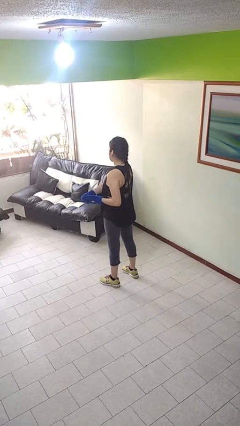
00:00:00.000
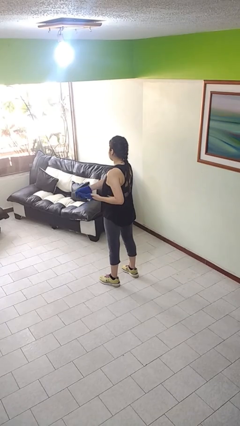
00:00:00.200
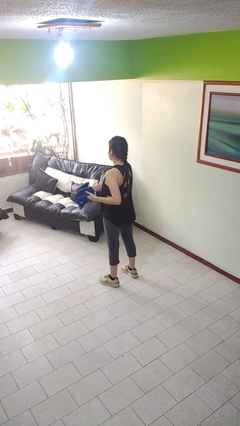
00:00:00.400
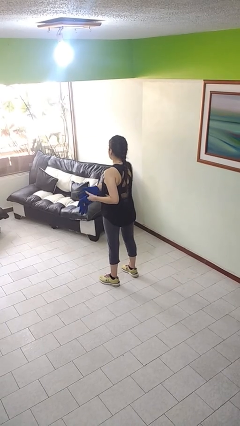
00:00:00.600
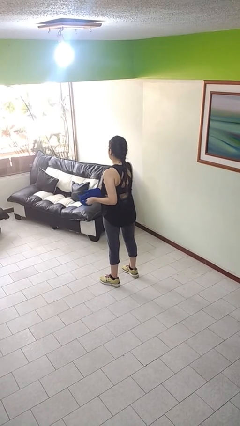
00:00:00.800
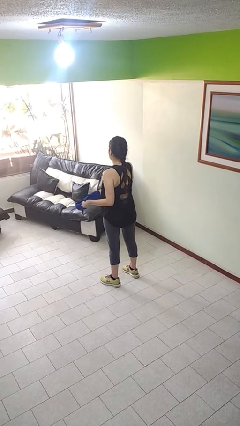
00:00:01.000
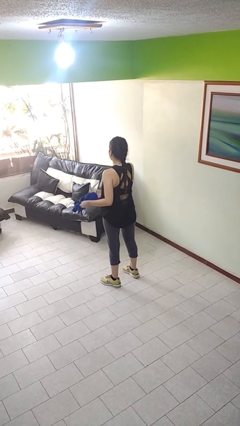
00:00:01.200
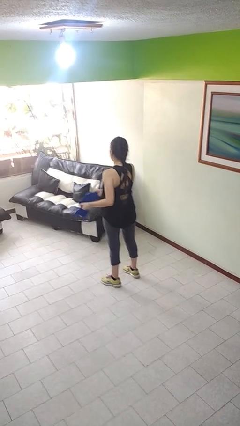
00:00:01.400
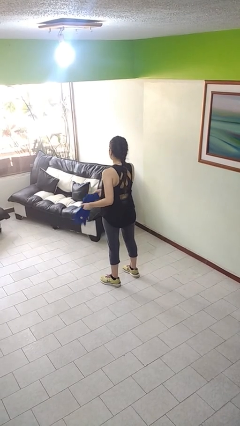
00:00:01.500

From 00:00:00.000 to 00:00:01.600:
person takes off gloves

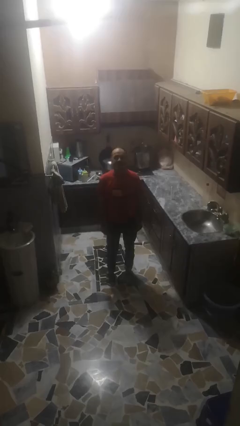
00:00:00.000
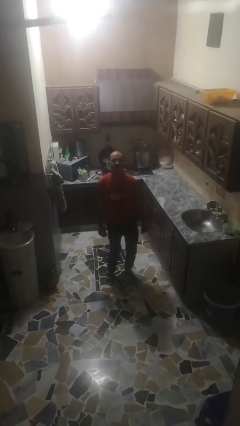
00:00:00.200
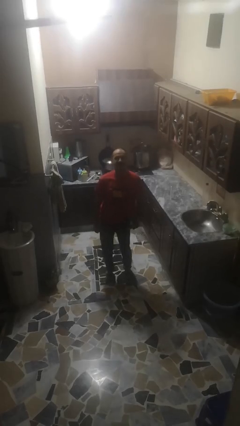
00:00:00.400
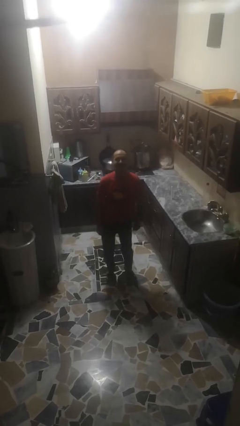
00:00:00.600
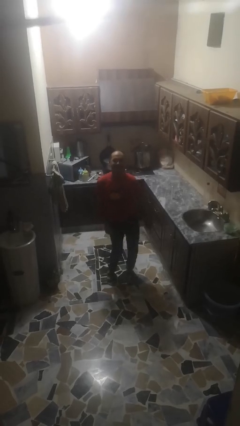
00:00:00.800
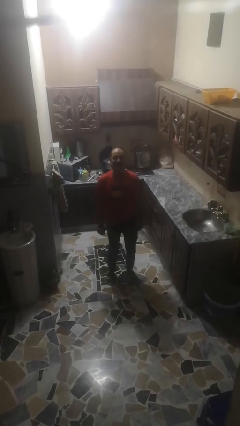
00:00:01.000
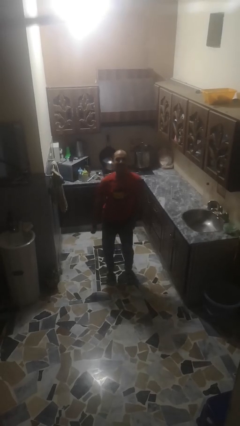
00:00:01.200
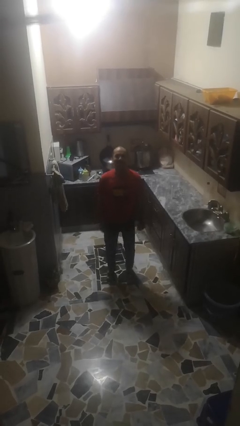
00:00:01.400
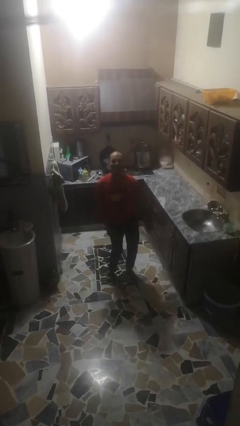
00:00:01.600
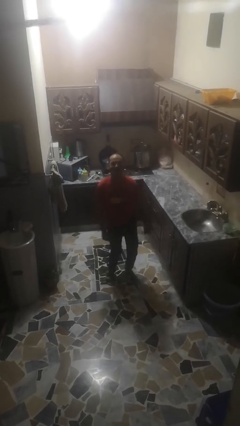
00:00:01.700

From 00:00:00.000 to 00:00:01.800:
person wiggles hips

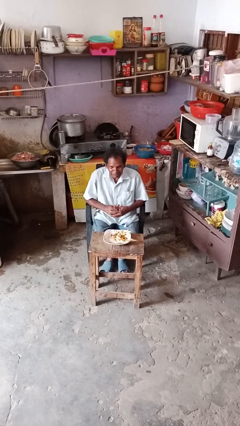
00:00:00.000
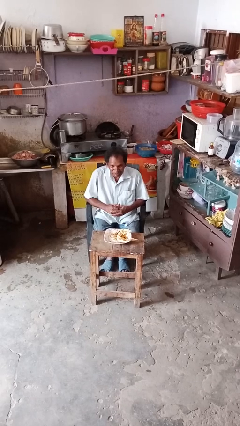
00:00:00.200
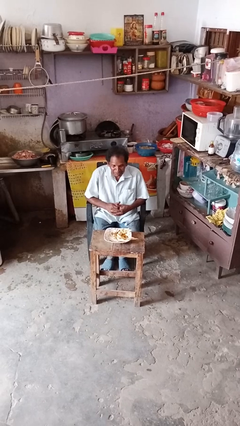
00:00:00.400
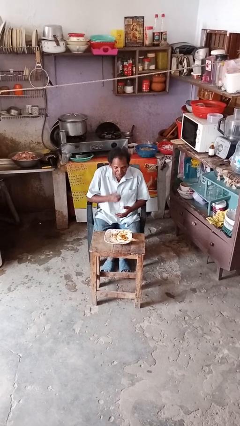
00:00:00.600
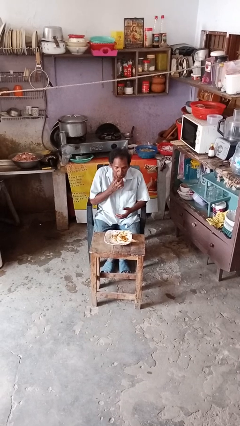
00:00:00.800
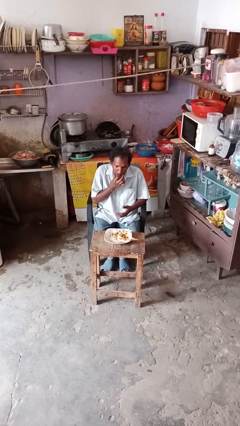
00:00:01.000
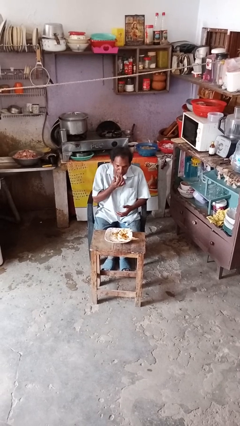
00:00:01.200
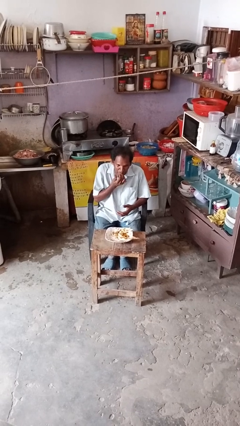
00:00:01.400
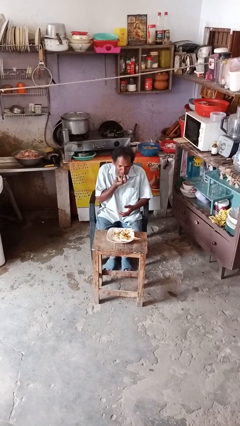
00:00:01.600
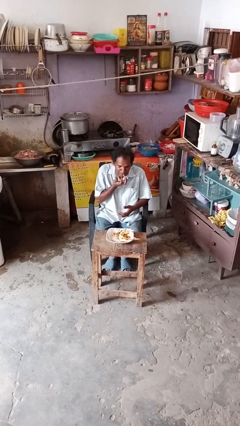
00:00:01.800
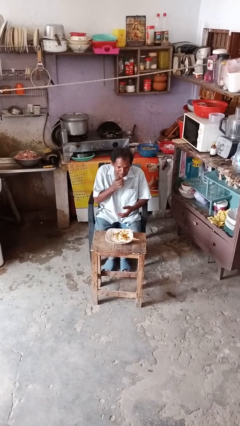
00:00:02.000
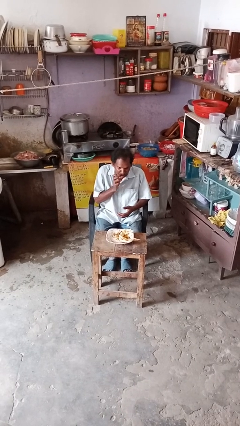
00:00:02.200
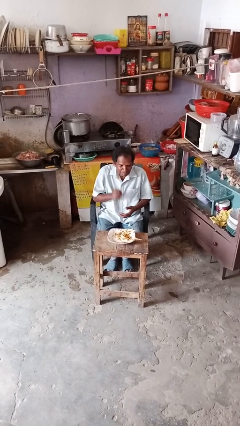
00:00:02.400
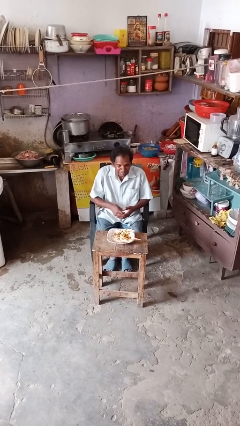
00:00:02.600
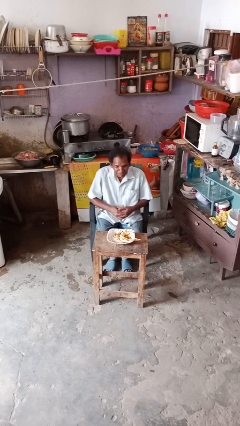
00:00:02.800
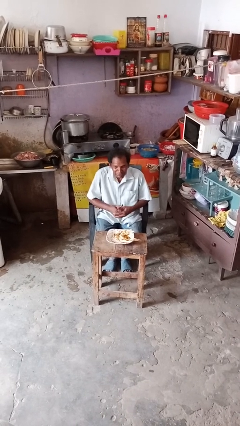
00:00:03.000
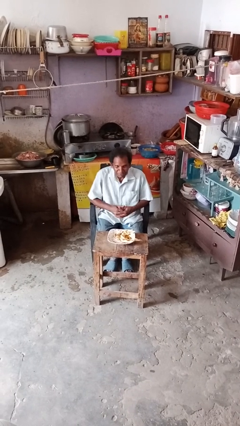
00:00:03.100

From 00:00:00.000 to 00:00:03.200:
person licks fingers

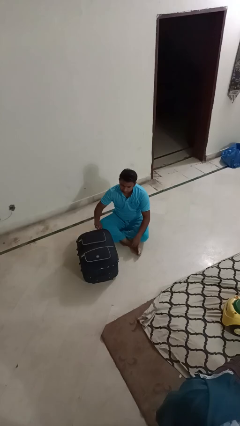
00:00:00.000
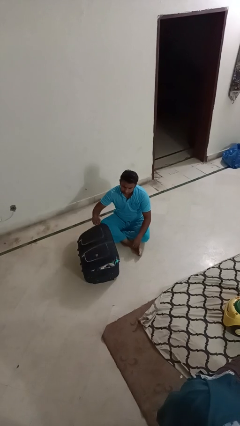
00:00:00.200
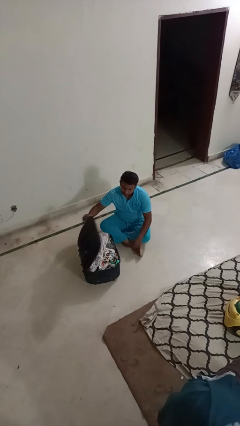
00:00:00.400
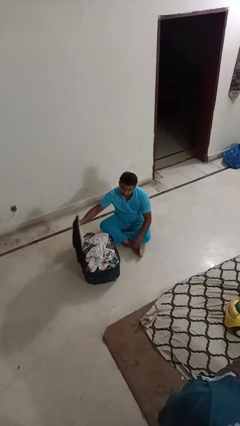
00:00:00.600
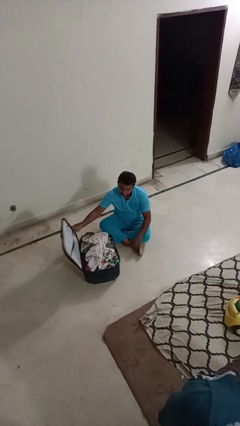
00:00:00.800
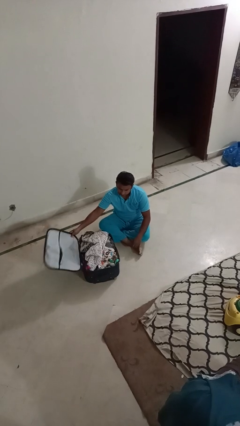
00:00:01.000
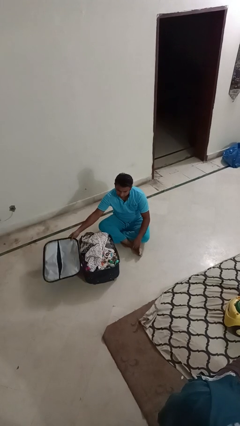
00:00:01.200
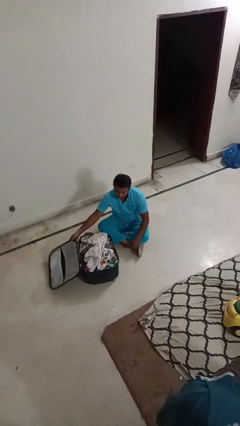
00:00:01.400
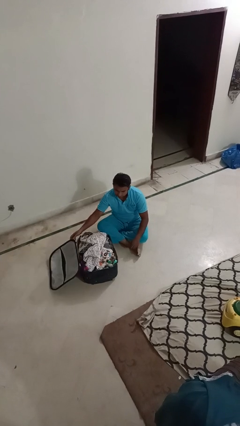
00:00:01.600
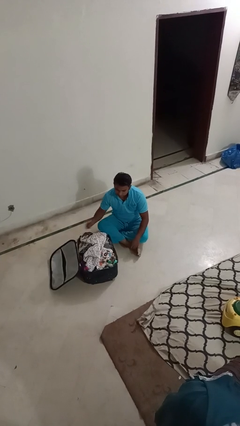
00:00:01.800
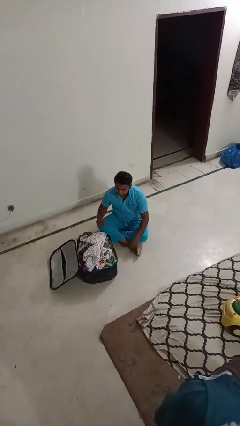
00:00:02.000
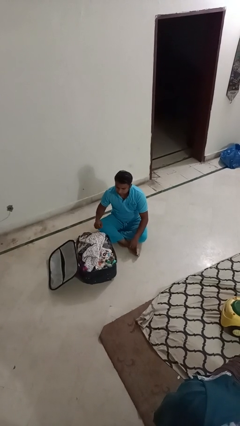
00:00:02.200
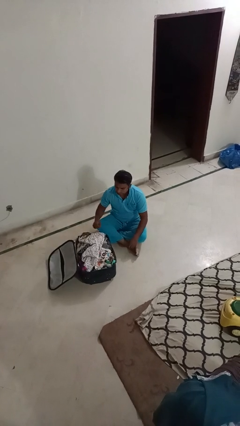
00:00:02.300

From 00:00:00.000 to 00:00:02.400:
person opens suitcase

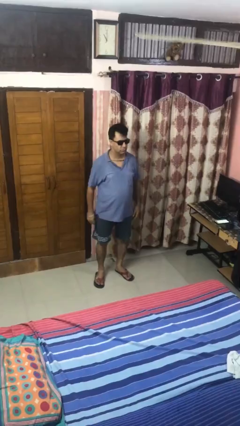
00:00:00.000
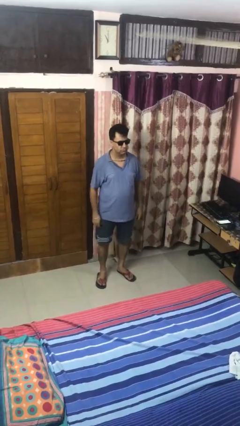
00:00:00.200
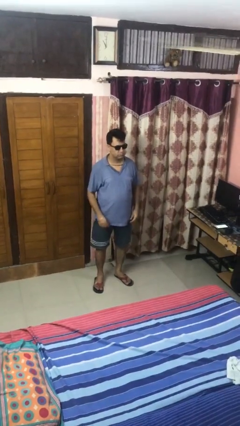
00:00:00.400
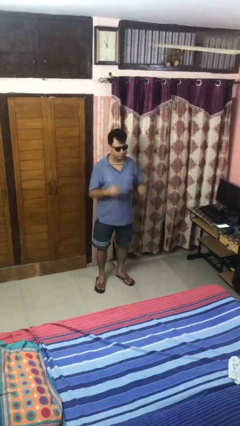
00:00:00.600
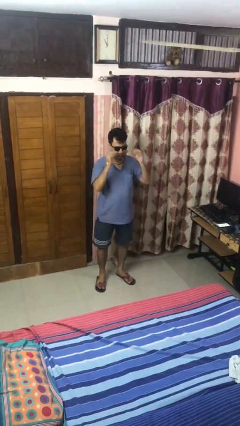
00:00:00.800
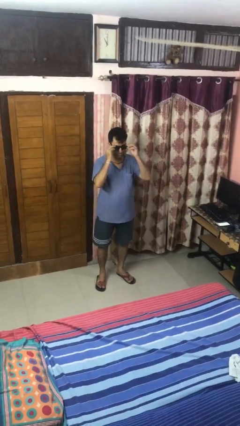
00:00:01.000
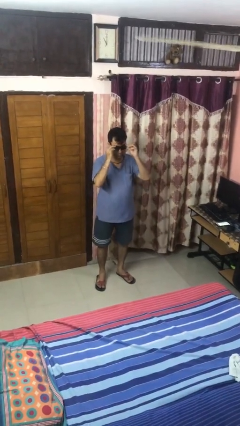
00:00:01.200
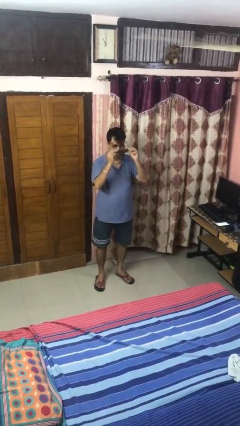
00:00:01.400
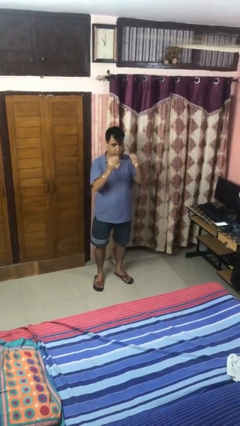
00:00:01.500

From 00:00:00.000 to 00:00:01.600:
person takes off sunglasses

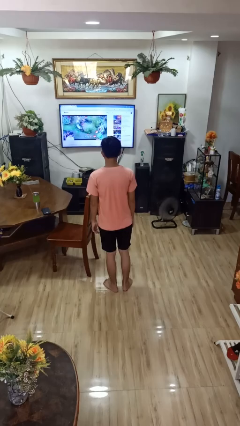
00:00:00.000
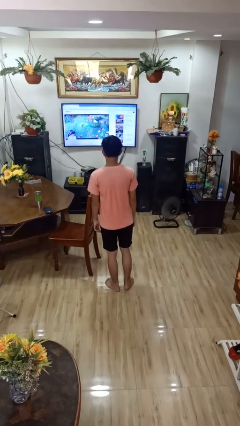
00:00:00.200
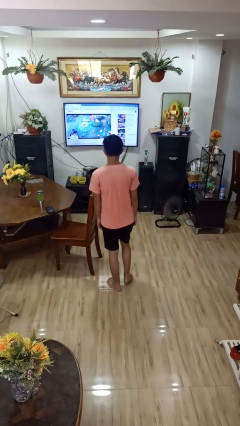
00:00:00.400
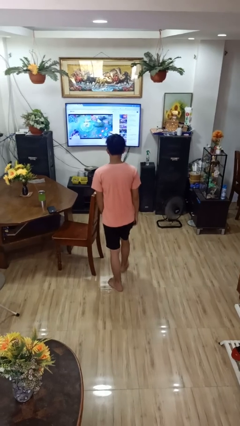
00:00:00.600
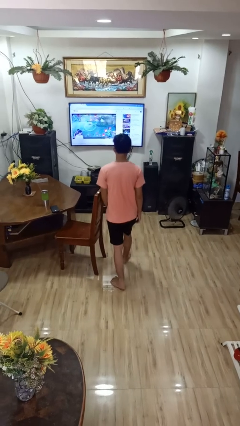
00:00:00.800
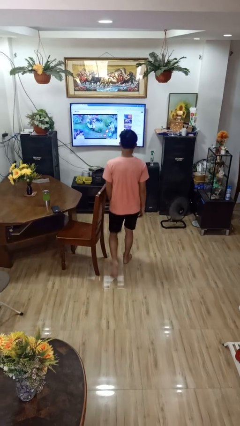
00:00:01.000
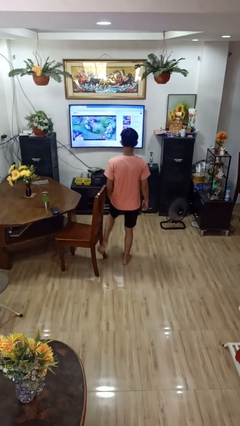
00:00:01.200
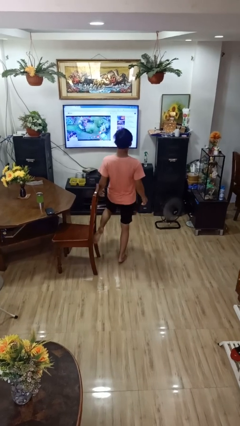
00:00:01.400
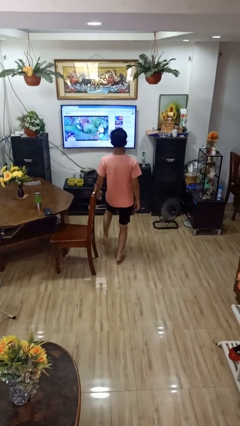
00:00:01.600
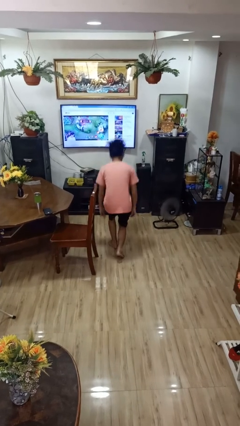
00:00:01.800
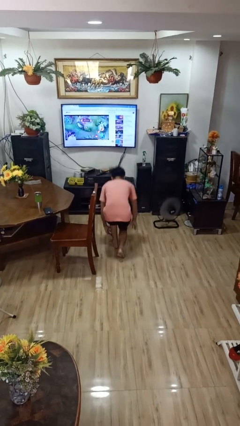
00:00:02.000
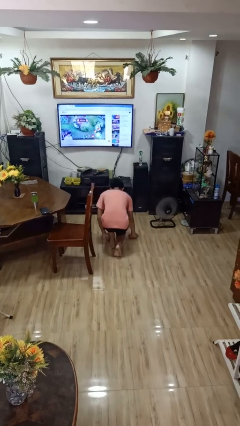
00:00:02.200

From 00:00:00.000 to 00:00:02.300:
person trips on object on floor

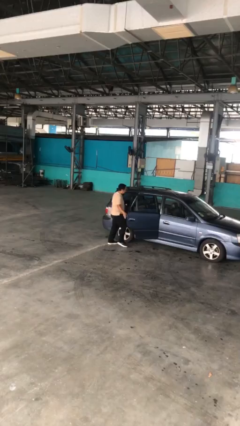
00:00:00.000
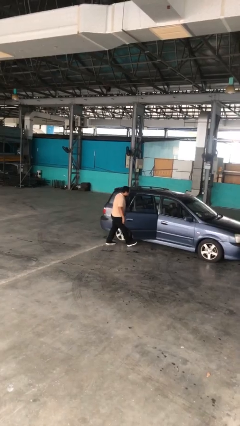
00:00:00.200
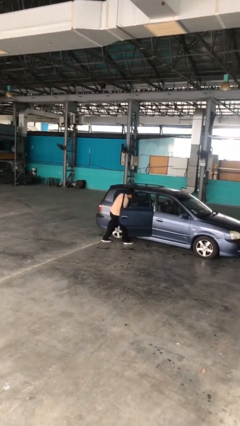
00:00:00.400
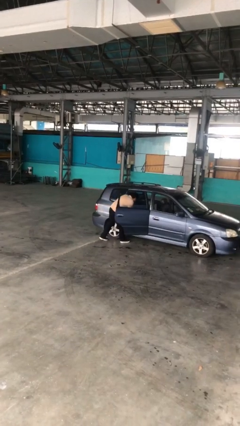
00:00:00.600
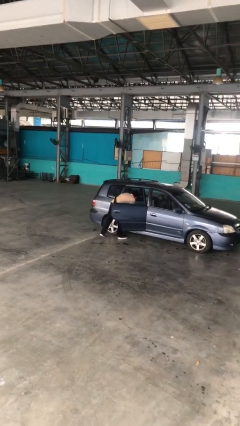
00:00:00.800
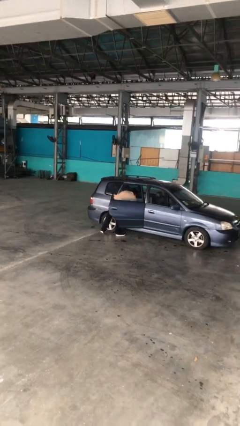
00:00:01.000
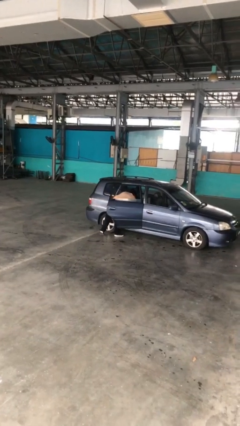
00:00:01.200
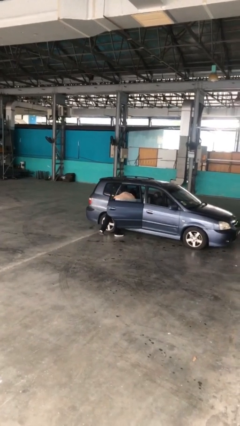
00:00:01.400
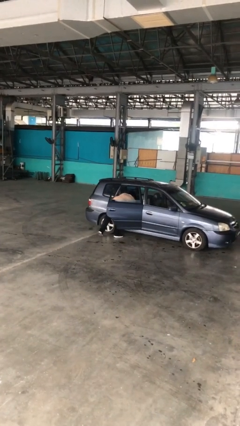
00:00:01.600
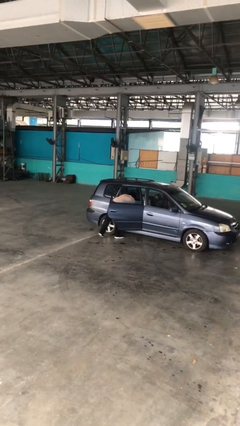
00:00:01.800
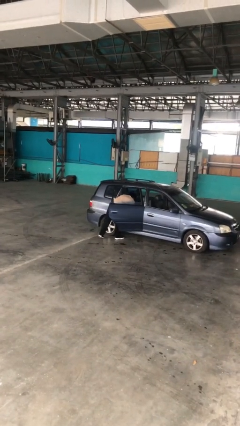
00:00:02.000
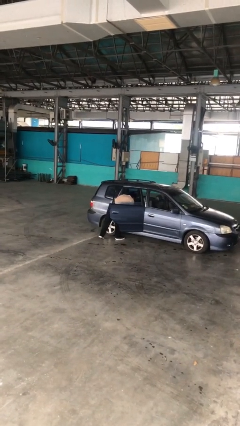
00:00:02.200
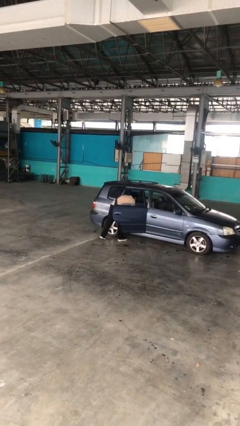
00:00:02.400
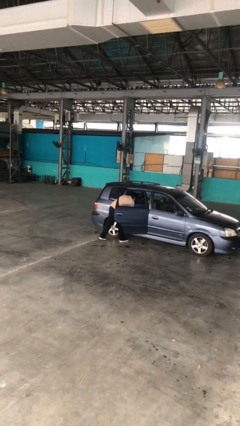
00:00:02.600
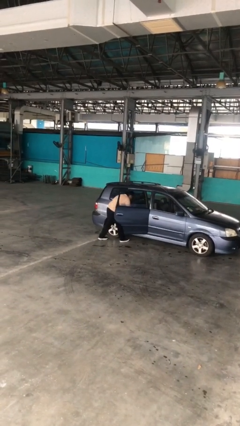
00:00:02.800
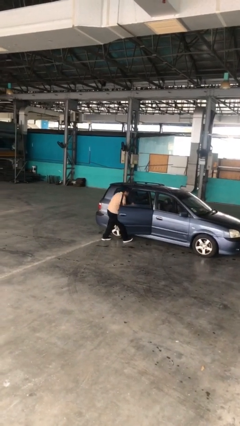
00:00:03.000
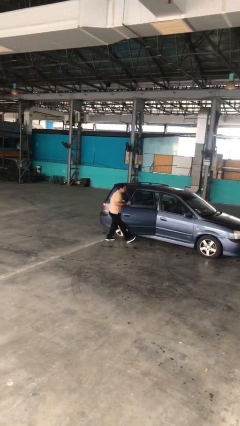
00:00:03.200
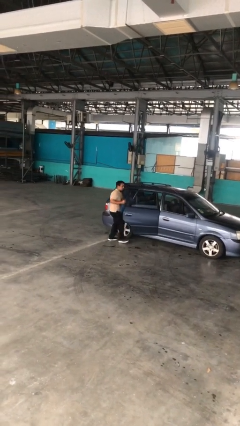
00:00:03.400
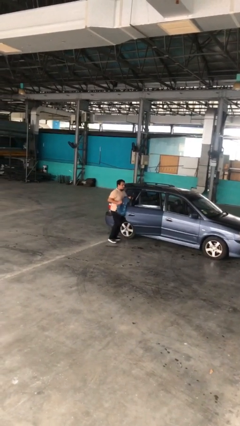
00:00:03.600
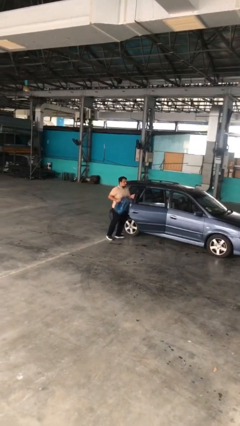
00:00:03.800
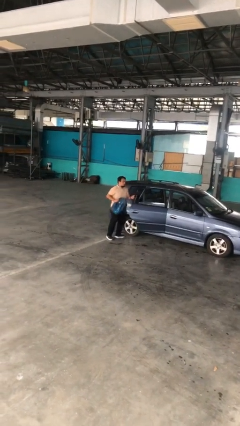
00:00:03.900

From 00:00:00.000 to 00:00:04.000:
person unloads car
